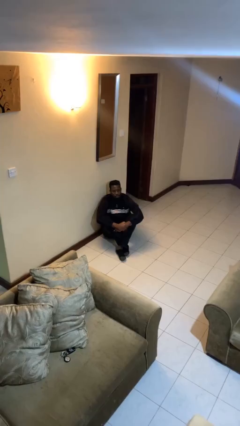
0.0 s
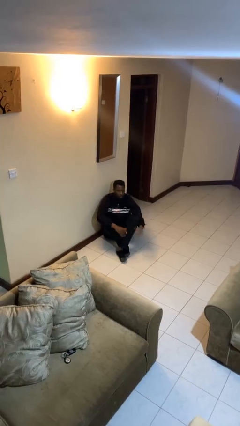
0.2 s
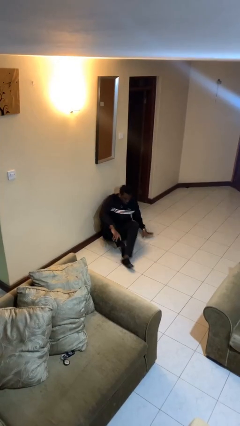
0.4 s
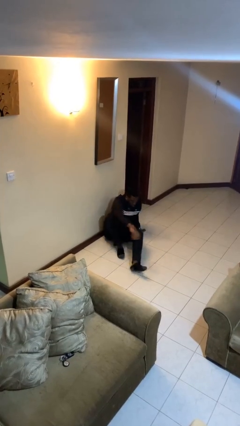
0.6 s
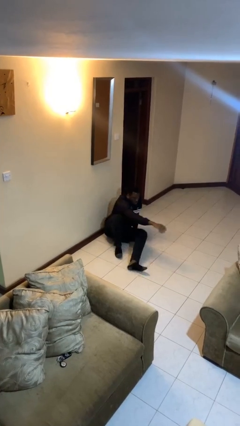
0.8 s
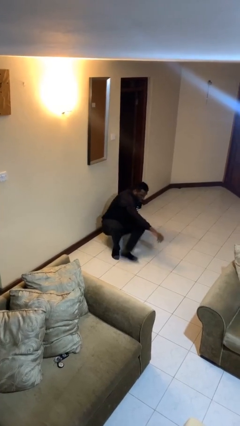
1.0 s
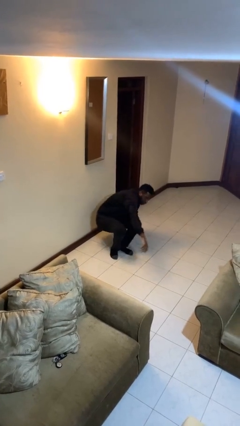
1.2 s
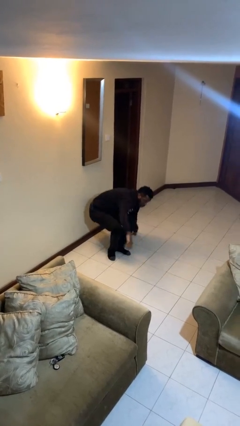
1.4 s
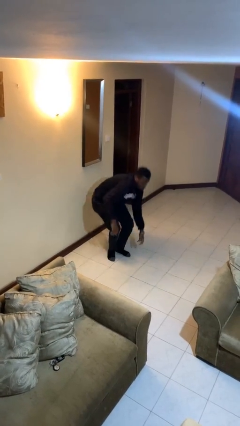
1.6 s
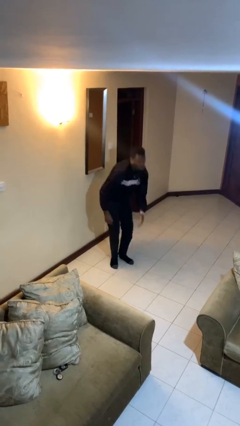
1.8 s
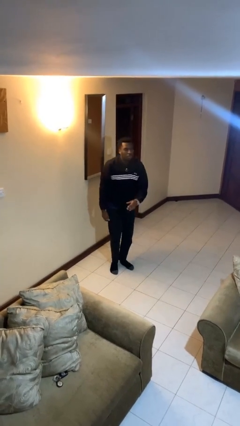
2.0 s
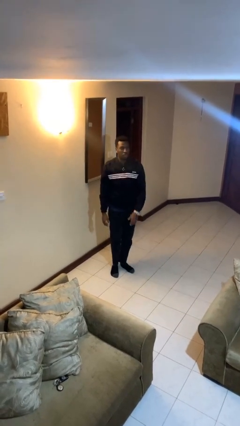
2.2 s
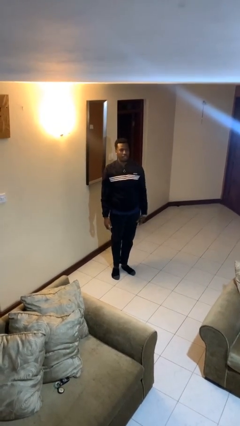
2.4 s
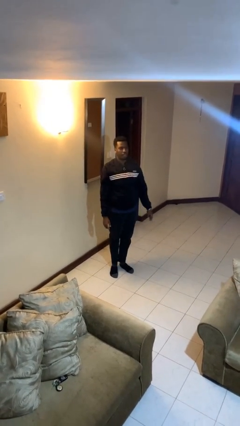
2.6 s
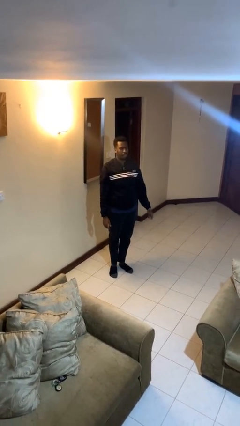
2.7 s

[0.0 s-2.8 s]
person stands up from floor

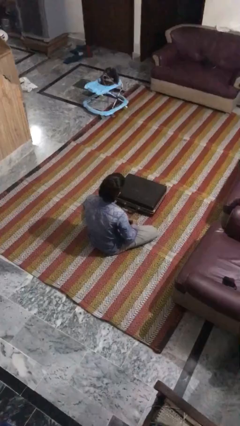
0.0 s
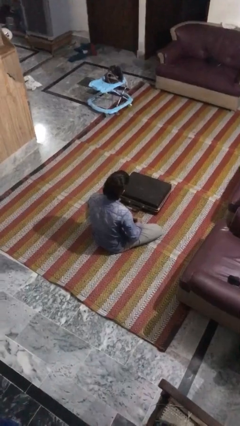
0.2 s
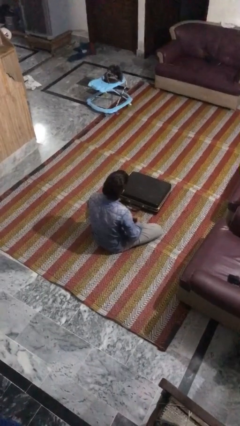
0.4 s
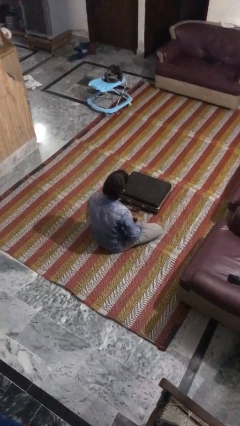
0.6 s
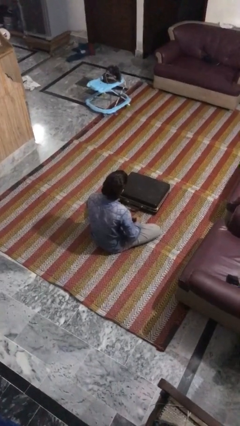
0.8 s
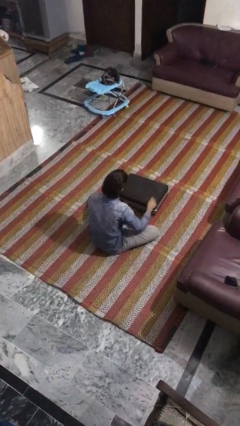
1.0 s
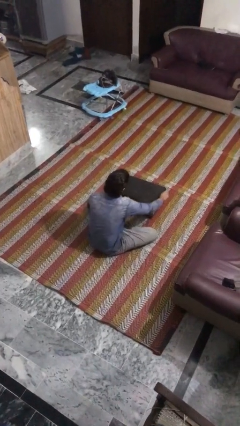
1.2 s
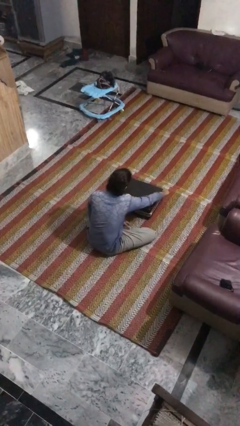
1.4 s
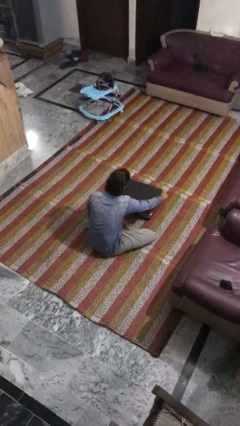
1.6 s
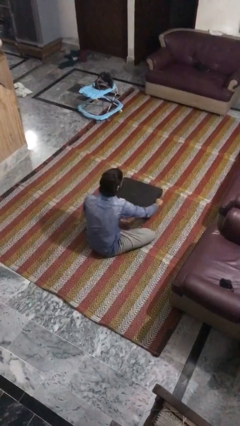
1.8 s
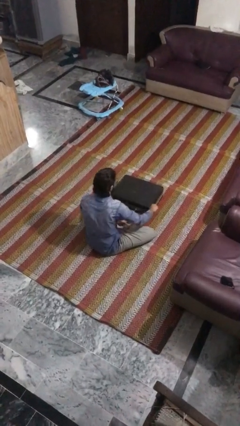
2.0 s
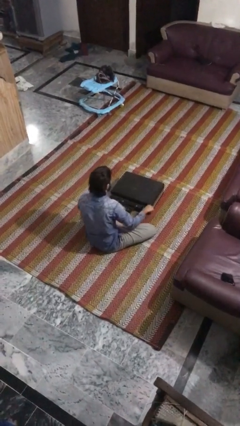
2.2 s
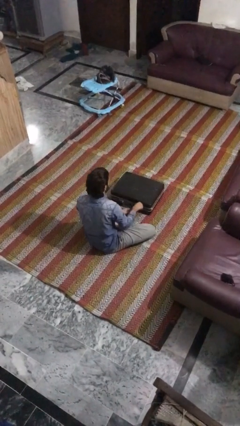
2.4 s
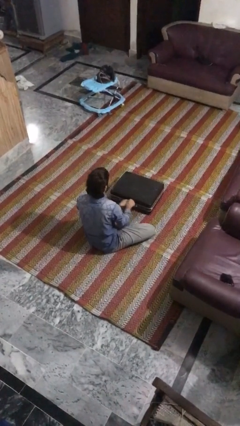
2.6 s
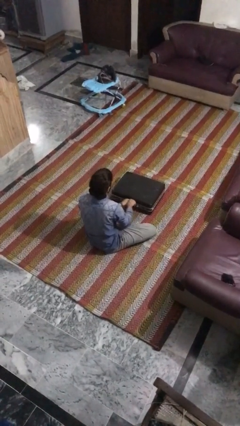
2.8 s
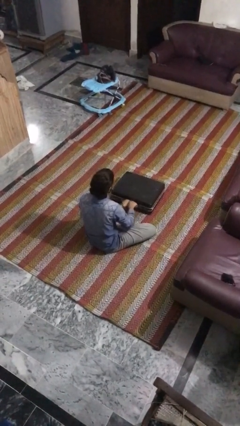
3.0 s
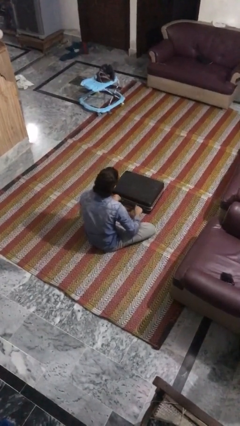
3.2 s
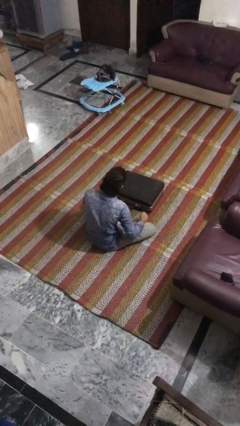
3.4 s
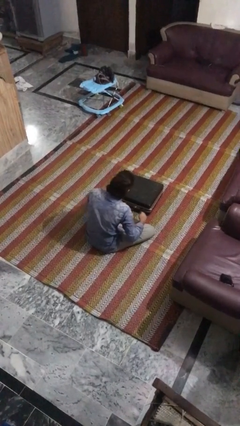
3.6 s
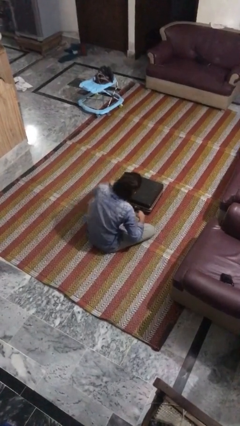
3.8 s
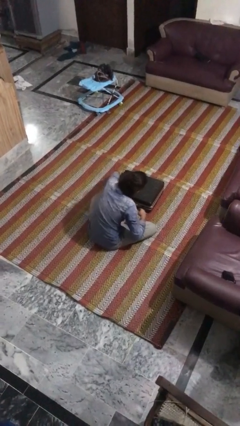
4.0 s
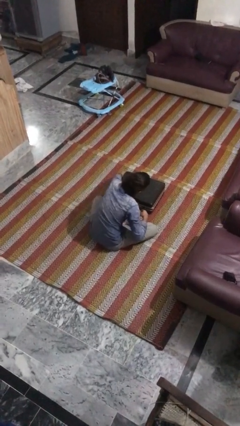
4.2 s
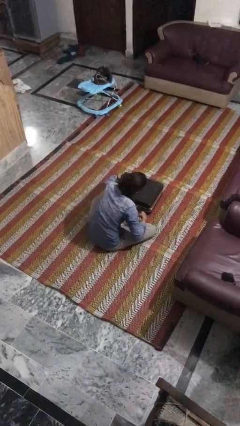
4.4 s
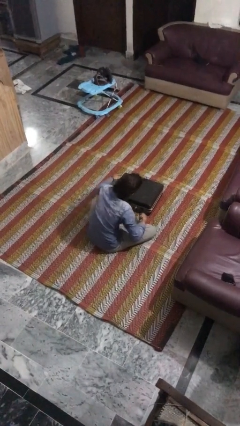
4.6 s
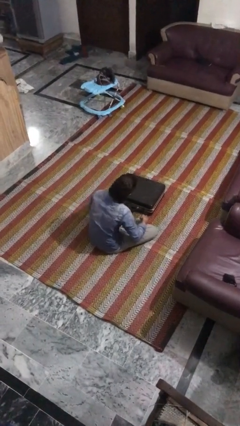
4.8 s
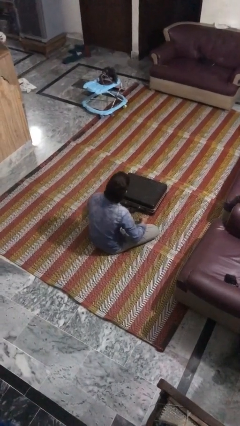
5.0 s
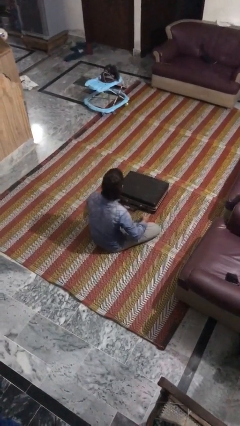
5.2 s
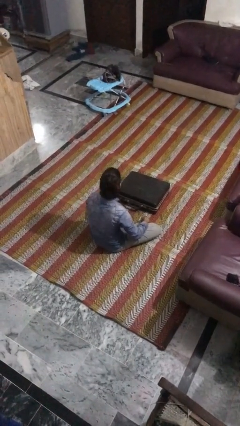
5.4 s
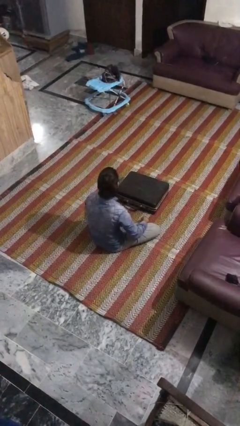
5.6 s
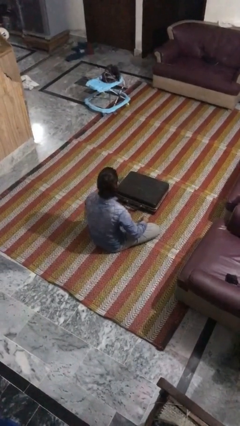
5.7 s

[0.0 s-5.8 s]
person opens suitcase

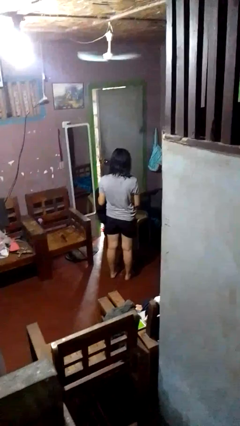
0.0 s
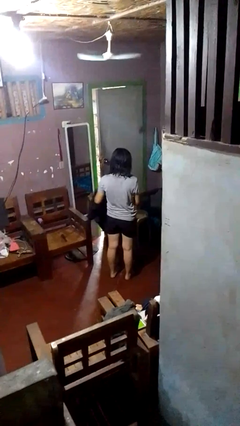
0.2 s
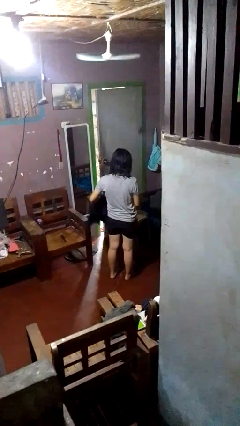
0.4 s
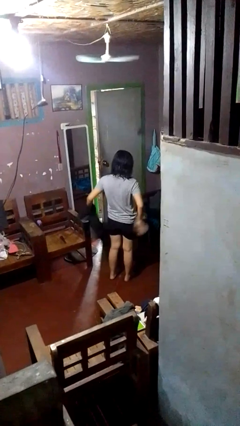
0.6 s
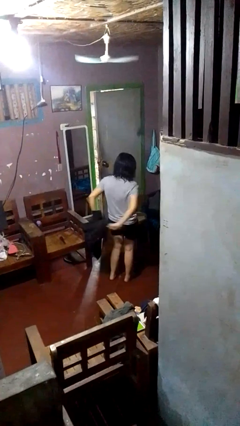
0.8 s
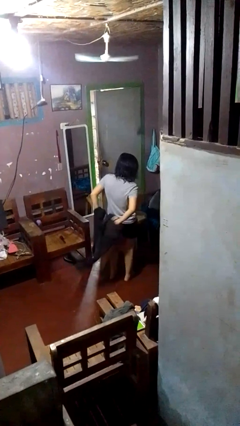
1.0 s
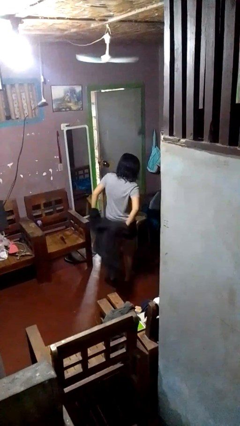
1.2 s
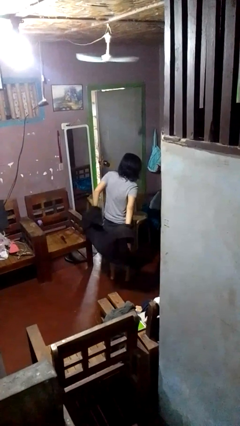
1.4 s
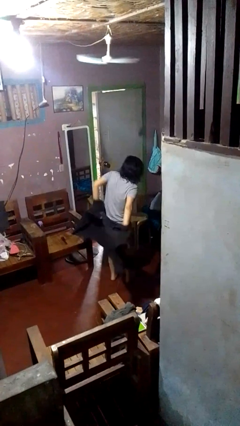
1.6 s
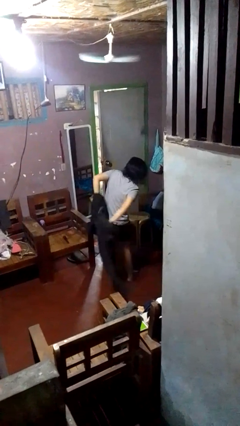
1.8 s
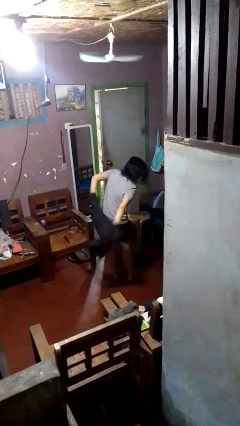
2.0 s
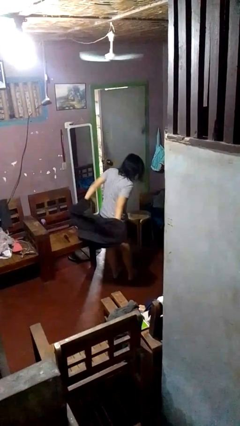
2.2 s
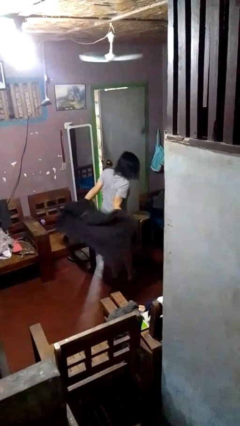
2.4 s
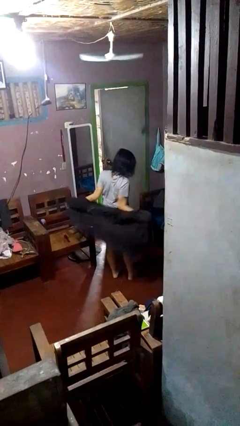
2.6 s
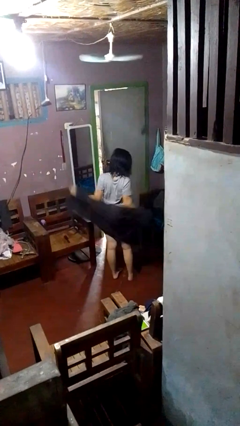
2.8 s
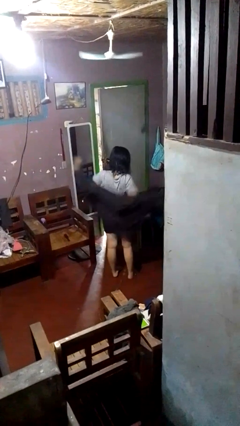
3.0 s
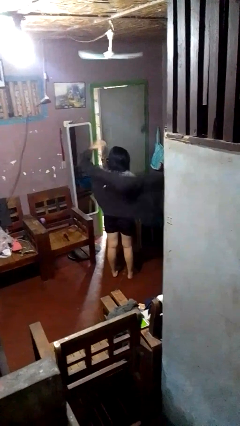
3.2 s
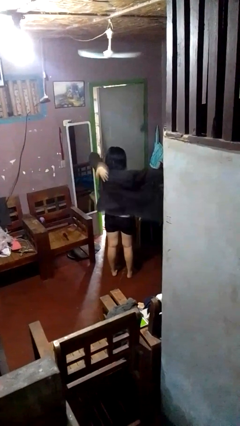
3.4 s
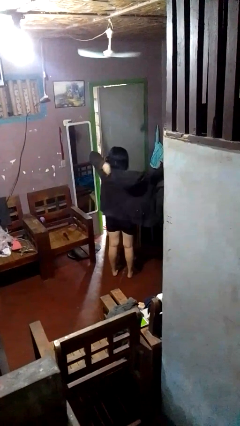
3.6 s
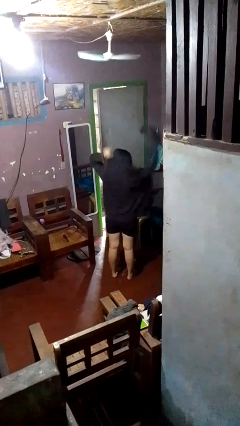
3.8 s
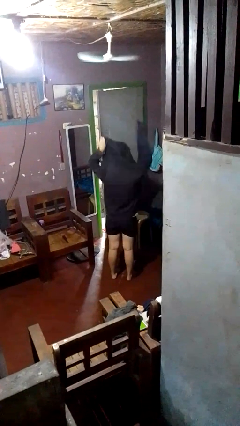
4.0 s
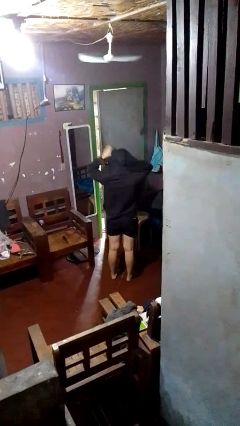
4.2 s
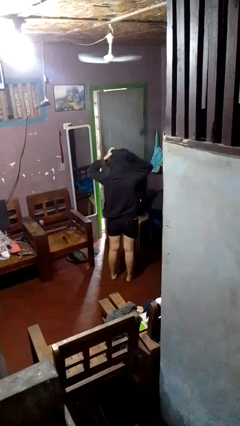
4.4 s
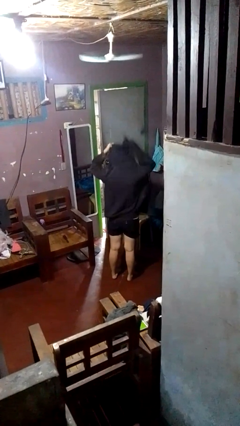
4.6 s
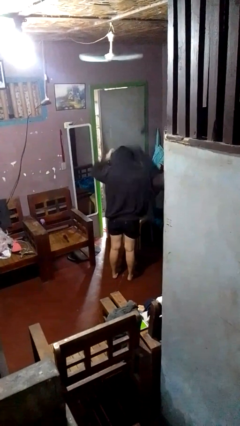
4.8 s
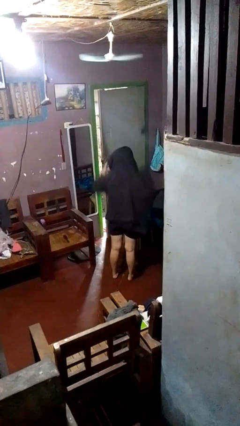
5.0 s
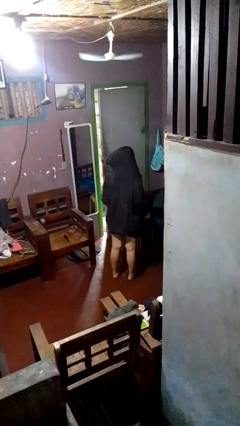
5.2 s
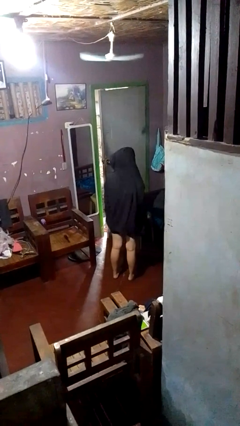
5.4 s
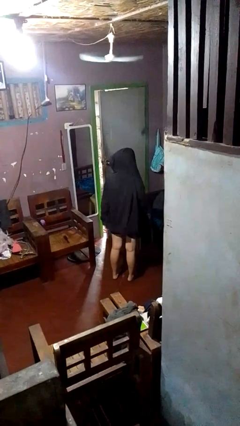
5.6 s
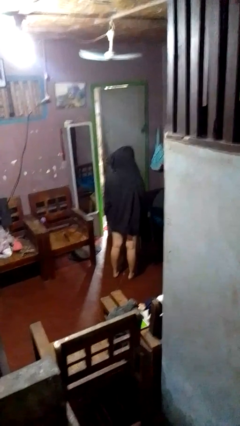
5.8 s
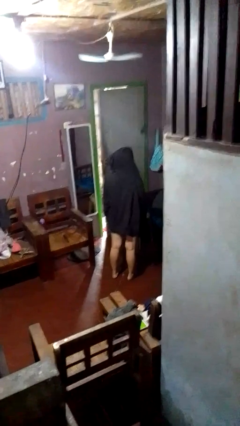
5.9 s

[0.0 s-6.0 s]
person puts on hoodie

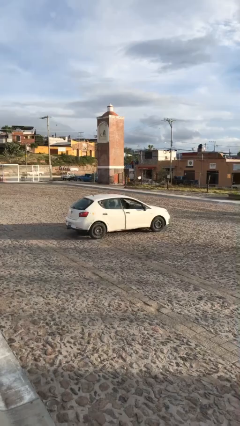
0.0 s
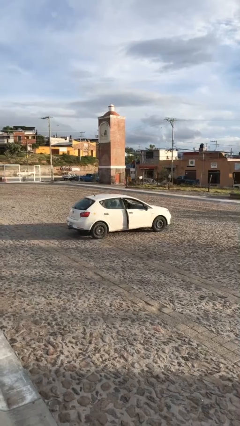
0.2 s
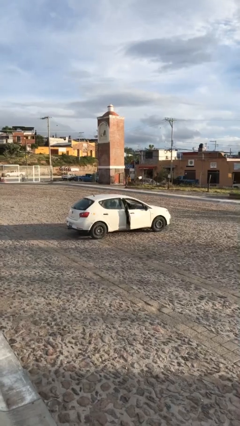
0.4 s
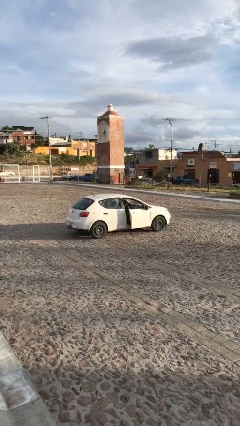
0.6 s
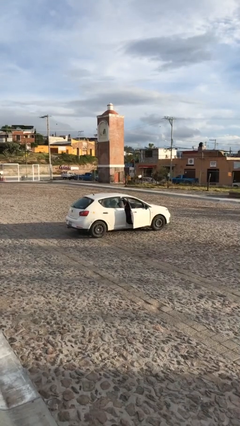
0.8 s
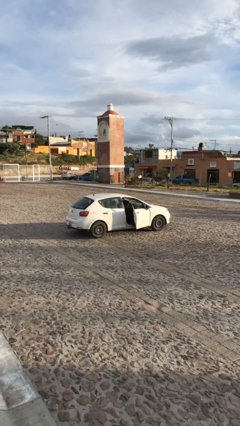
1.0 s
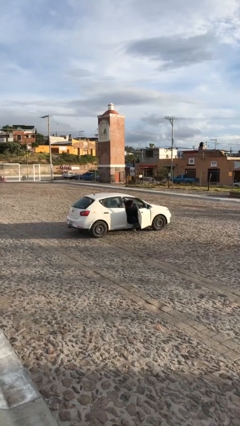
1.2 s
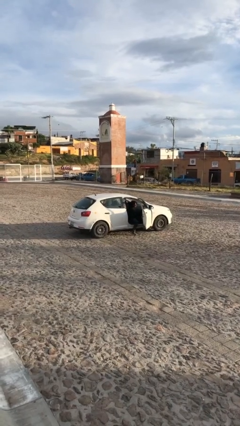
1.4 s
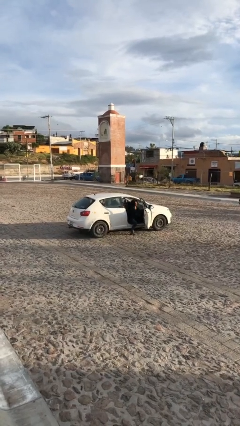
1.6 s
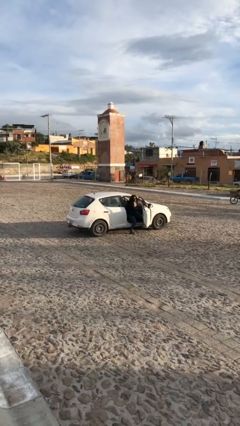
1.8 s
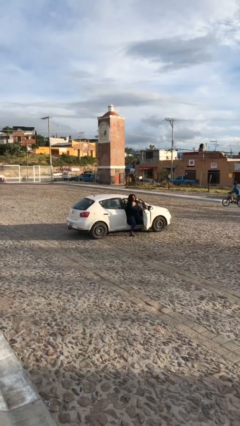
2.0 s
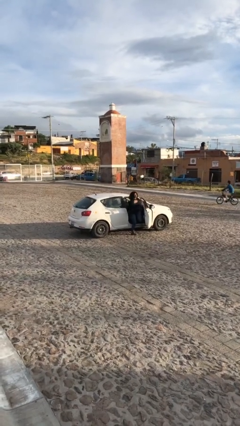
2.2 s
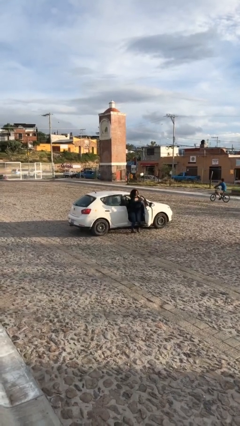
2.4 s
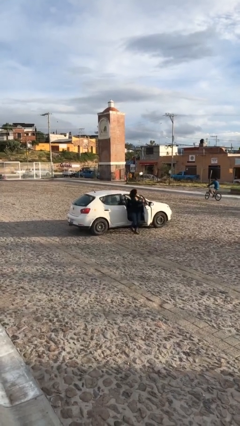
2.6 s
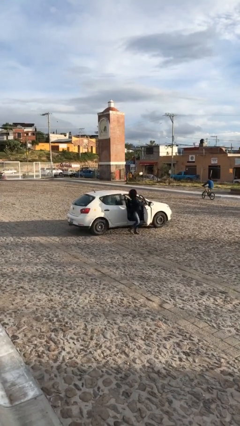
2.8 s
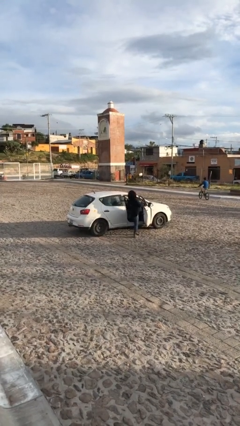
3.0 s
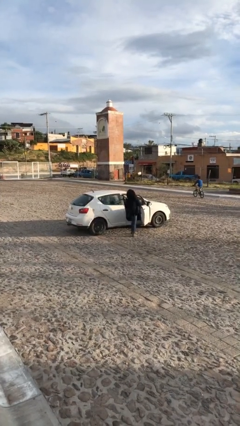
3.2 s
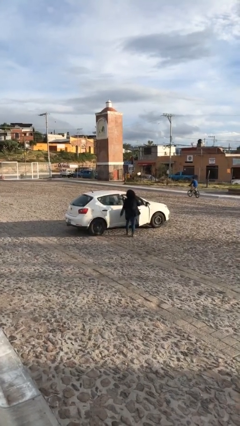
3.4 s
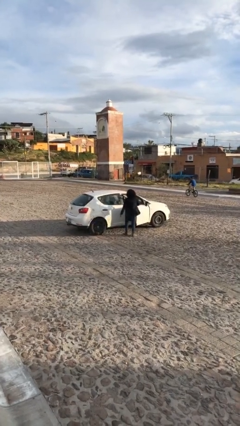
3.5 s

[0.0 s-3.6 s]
car drops off person
